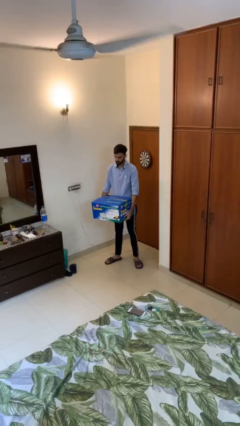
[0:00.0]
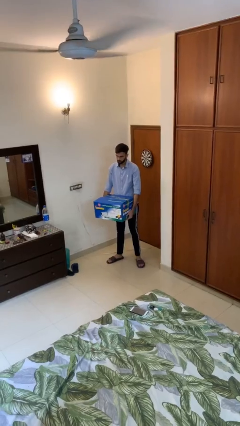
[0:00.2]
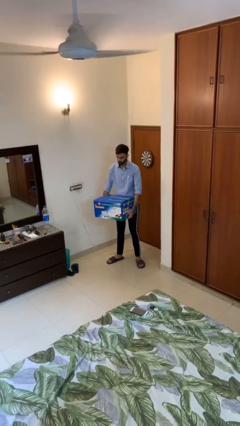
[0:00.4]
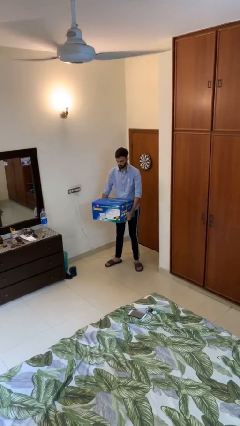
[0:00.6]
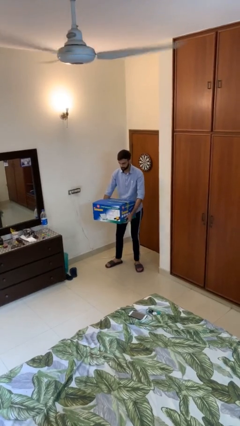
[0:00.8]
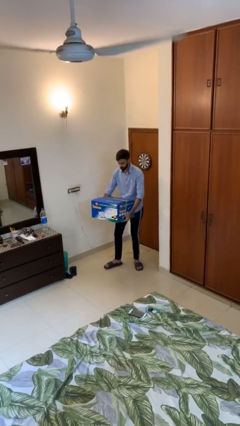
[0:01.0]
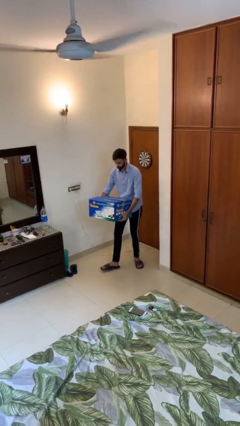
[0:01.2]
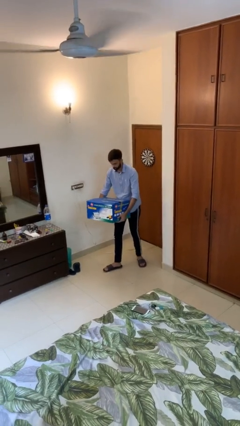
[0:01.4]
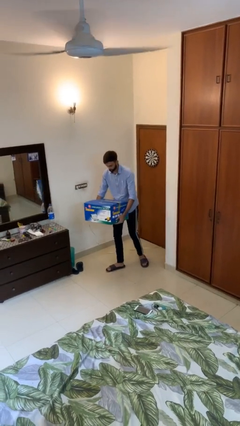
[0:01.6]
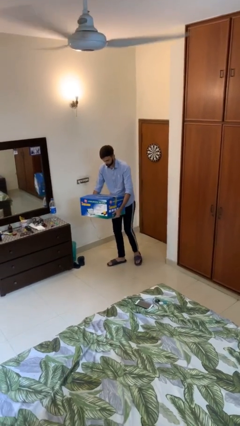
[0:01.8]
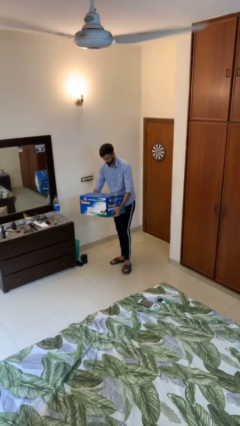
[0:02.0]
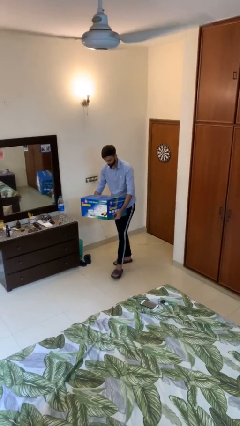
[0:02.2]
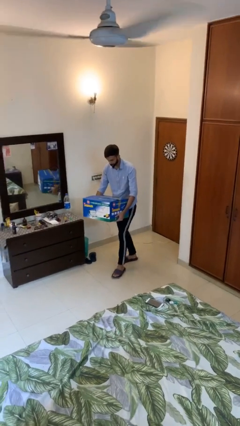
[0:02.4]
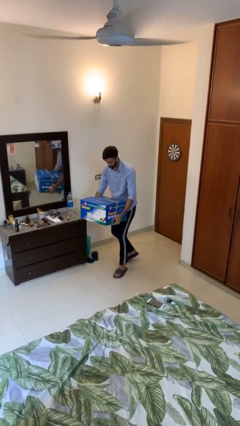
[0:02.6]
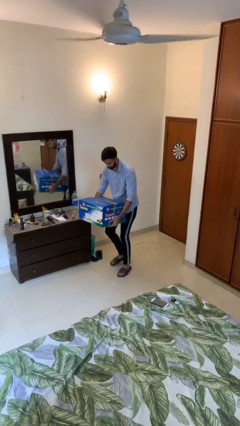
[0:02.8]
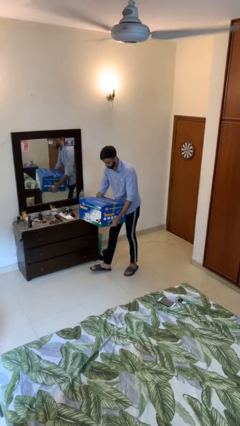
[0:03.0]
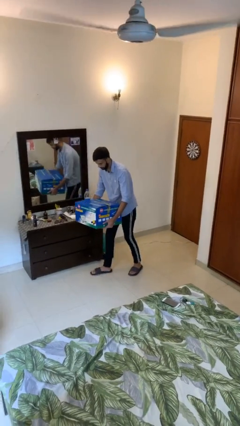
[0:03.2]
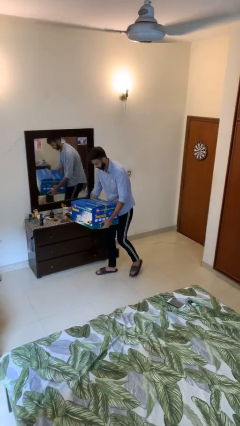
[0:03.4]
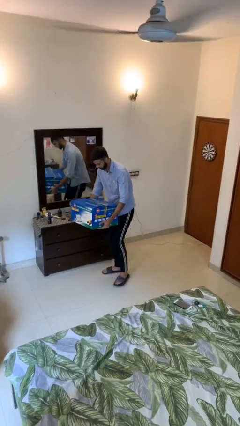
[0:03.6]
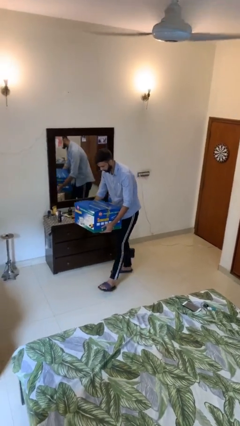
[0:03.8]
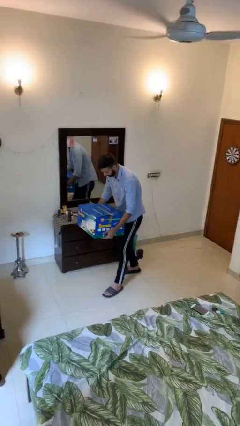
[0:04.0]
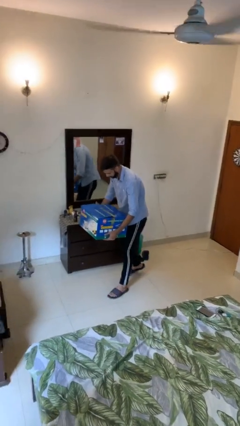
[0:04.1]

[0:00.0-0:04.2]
person carries heavy object

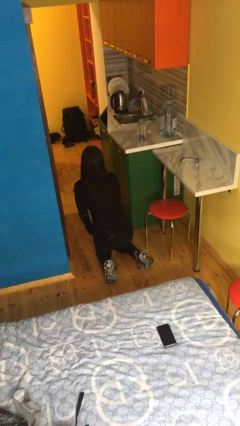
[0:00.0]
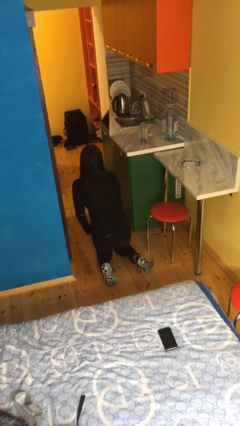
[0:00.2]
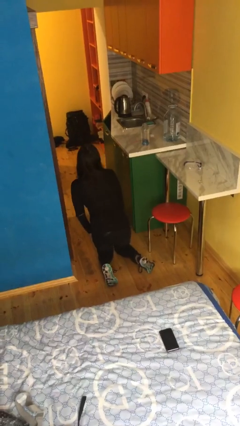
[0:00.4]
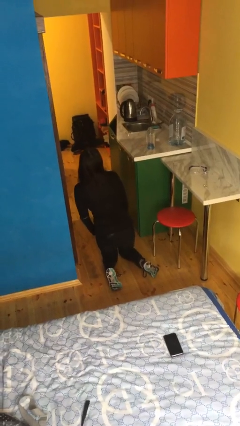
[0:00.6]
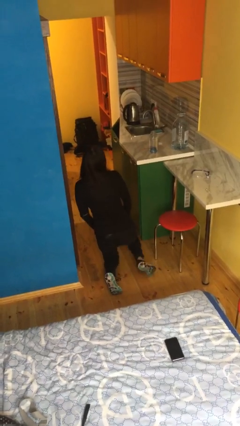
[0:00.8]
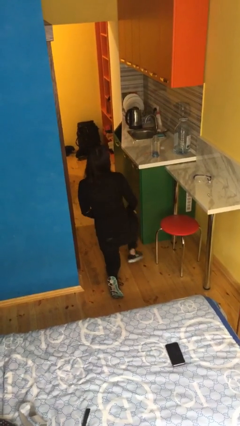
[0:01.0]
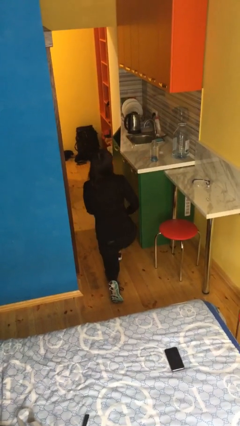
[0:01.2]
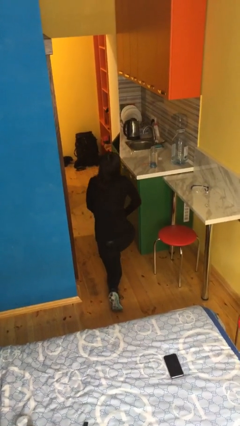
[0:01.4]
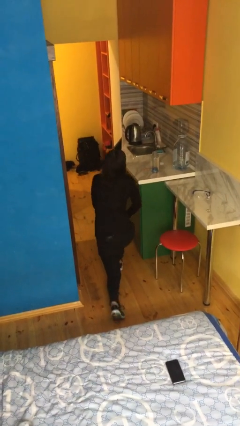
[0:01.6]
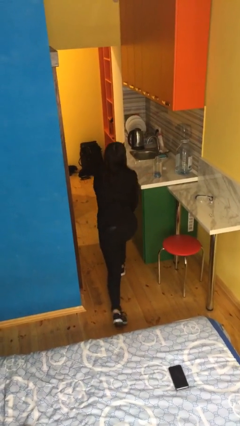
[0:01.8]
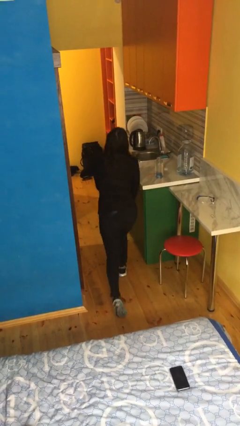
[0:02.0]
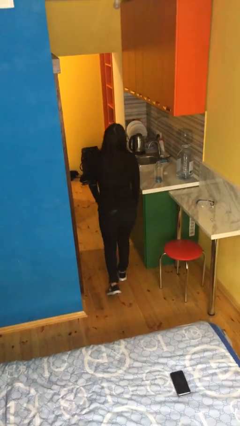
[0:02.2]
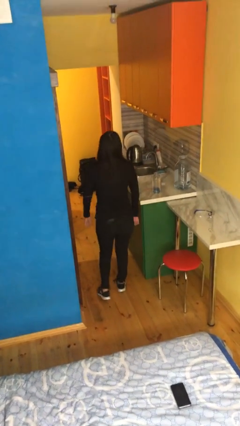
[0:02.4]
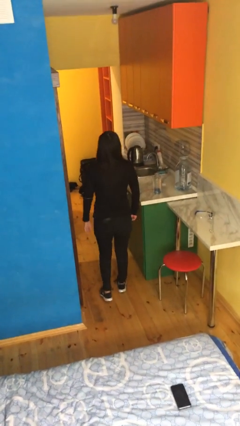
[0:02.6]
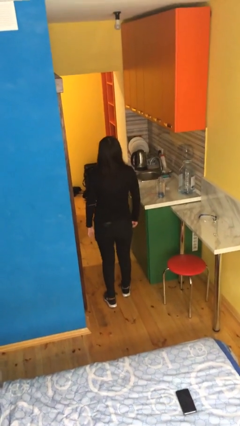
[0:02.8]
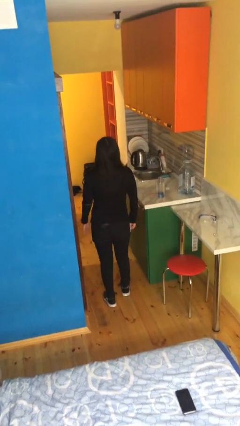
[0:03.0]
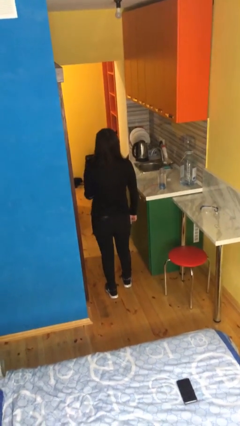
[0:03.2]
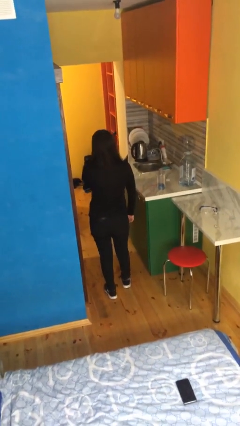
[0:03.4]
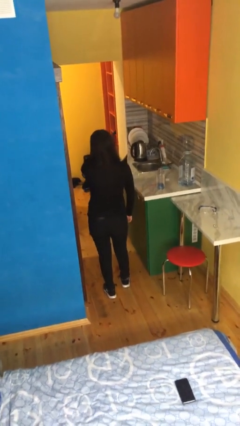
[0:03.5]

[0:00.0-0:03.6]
person stands up from floor

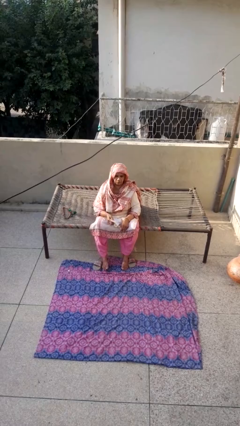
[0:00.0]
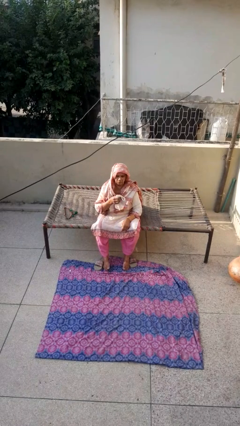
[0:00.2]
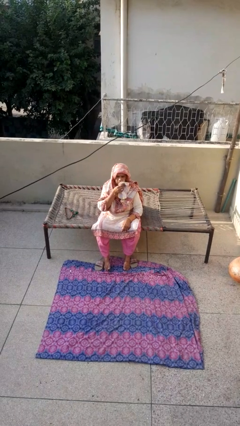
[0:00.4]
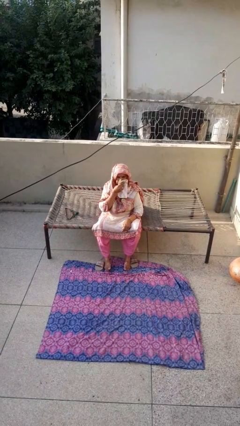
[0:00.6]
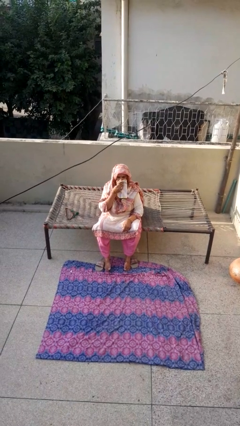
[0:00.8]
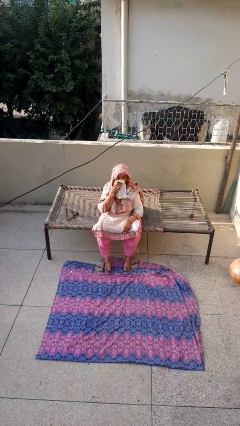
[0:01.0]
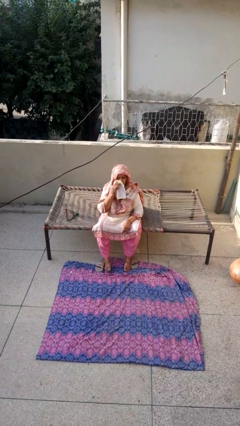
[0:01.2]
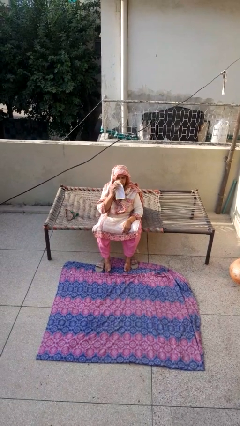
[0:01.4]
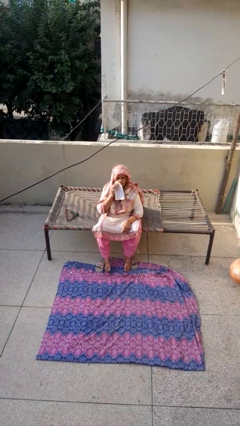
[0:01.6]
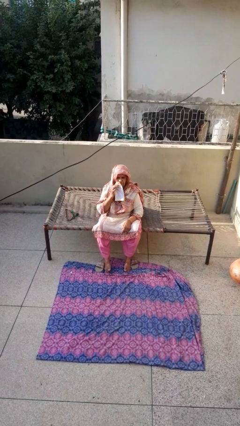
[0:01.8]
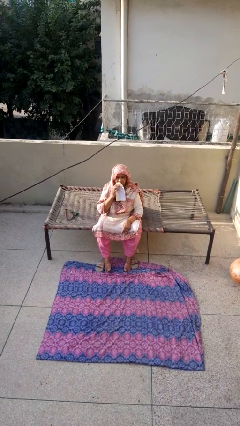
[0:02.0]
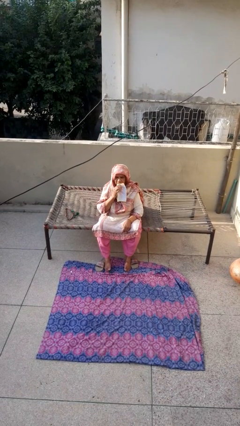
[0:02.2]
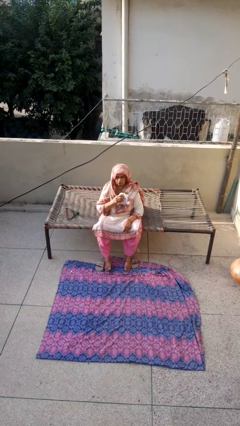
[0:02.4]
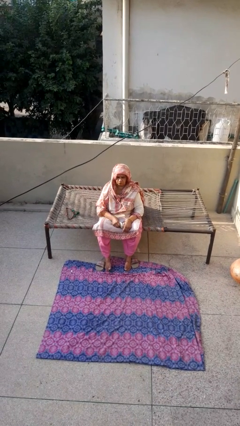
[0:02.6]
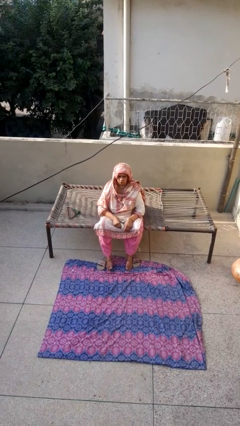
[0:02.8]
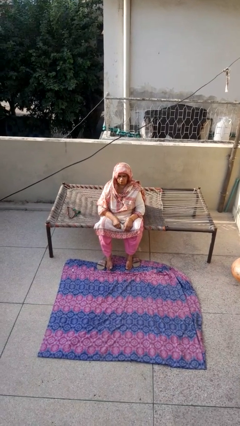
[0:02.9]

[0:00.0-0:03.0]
person wipes mouth with napkin

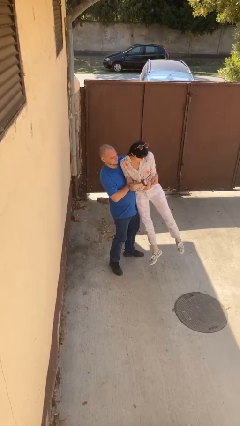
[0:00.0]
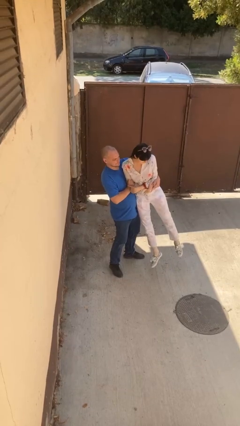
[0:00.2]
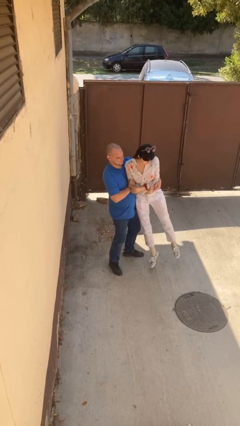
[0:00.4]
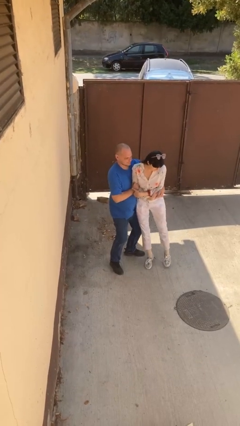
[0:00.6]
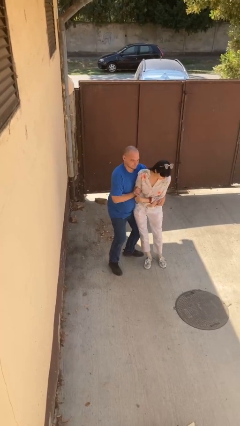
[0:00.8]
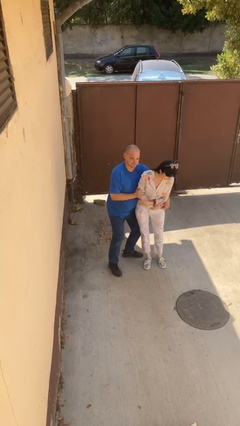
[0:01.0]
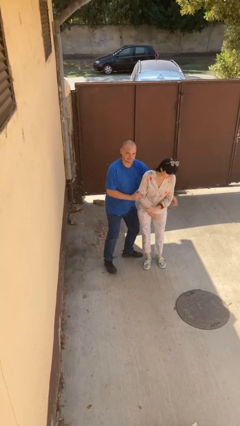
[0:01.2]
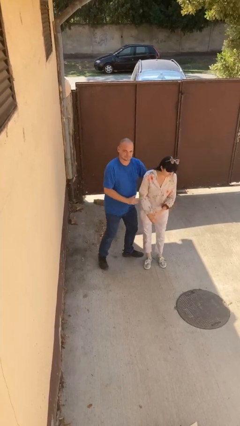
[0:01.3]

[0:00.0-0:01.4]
person puts down person

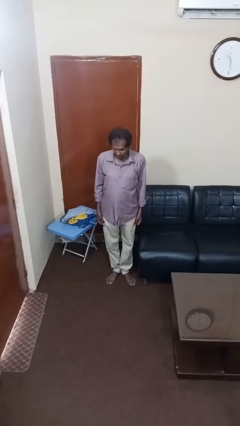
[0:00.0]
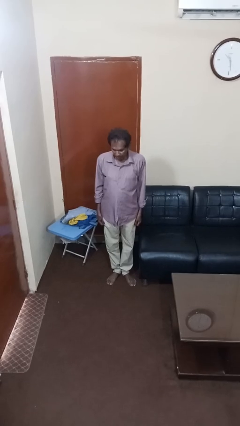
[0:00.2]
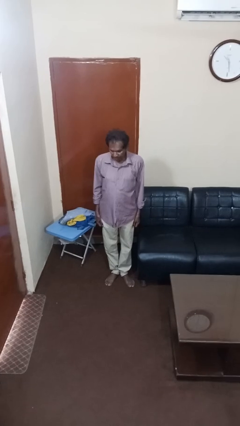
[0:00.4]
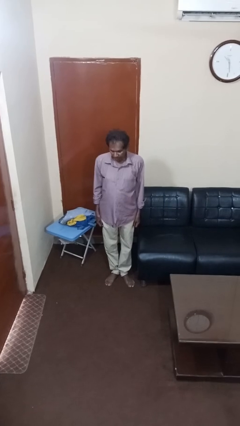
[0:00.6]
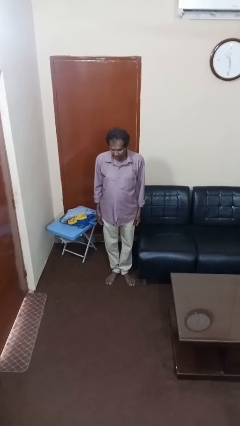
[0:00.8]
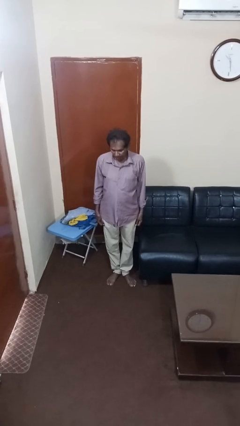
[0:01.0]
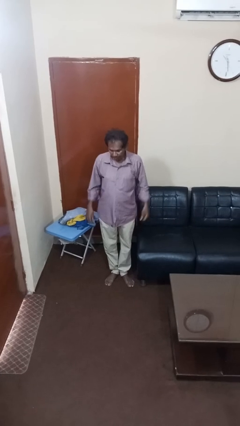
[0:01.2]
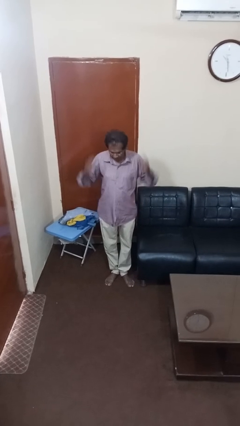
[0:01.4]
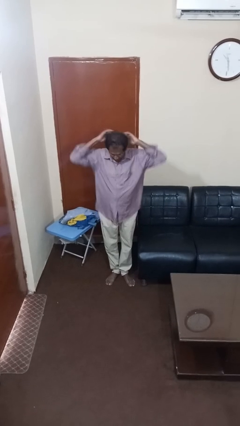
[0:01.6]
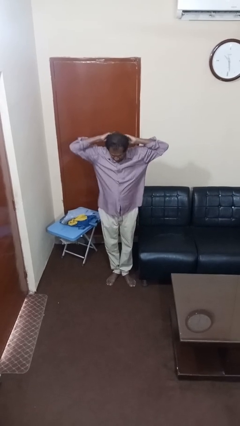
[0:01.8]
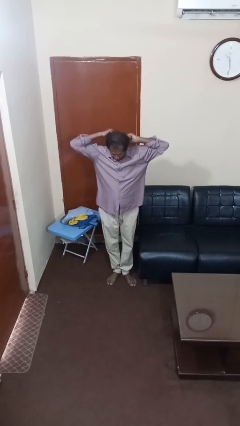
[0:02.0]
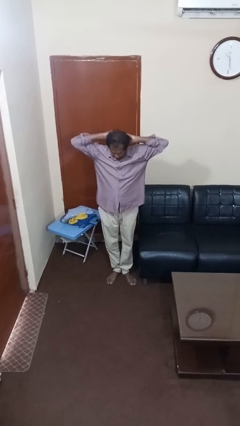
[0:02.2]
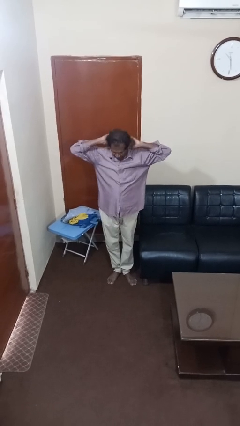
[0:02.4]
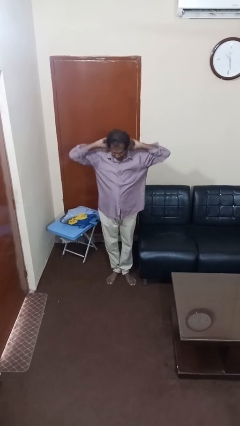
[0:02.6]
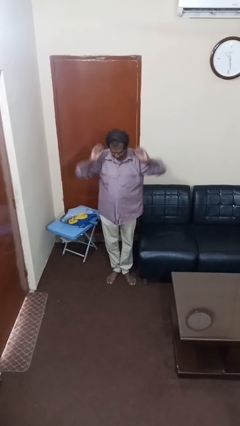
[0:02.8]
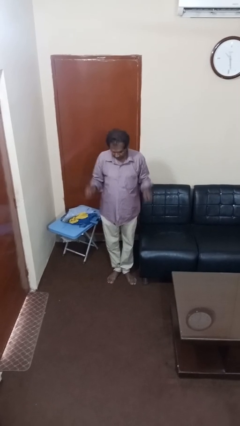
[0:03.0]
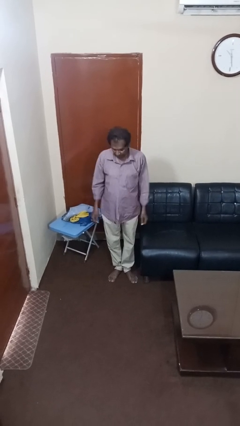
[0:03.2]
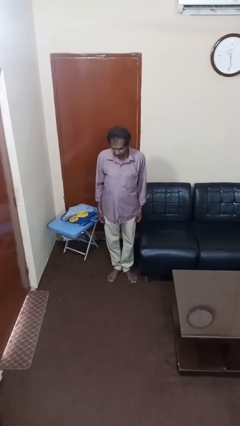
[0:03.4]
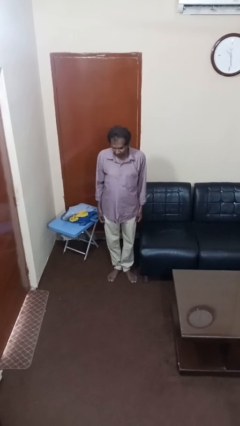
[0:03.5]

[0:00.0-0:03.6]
person takes off hairtie

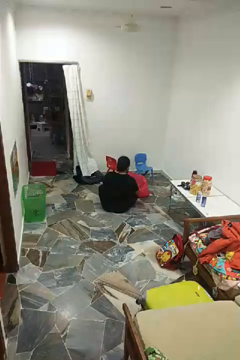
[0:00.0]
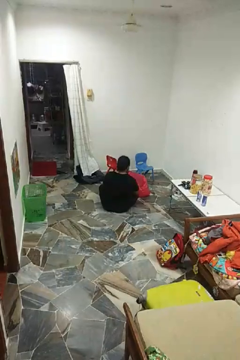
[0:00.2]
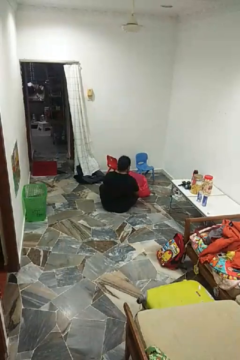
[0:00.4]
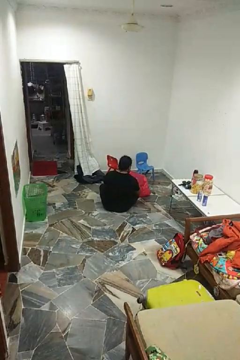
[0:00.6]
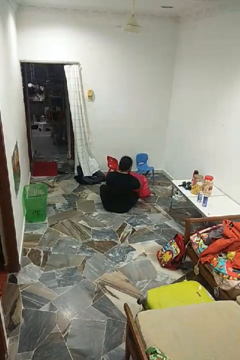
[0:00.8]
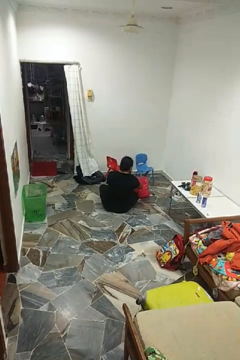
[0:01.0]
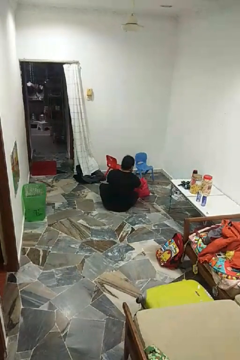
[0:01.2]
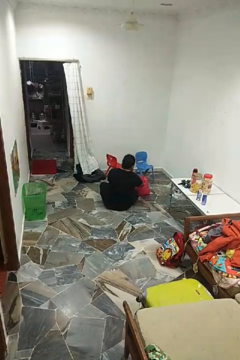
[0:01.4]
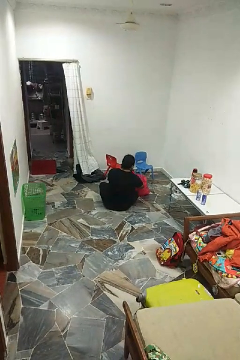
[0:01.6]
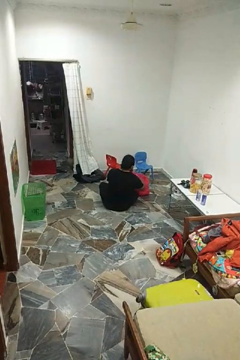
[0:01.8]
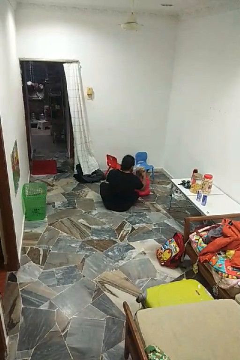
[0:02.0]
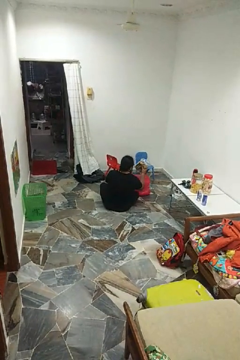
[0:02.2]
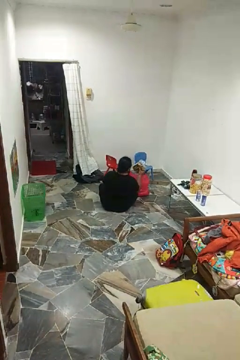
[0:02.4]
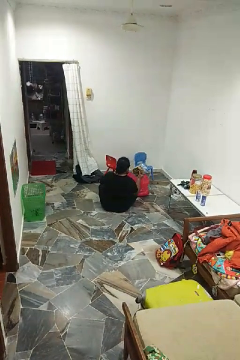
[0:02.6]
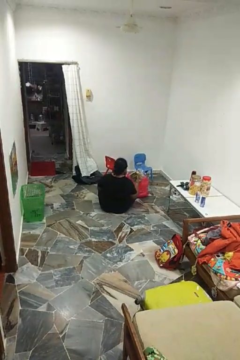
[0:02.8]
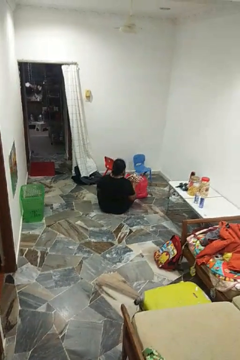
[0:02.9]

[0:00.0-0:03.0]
person takes object from bag
